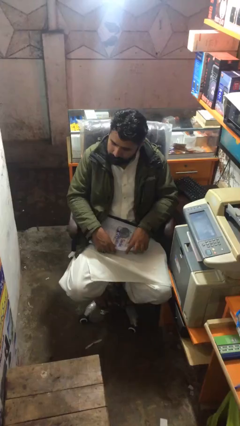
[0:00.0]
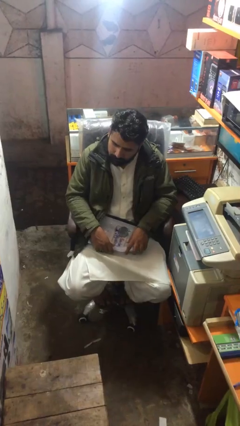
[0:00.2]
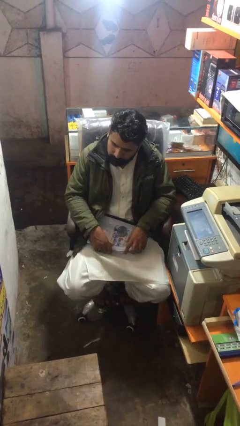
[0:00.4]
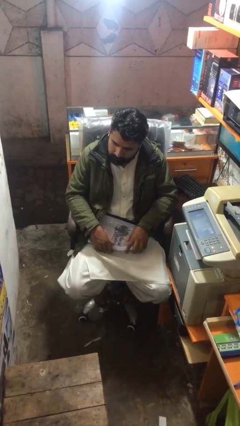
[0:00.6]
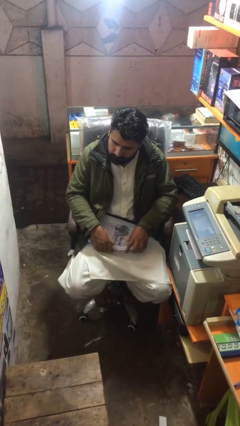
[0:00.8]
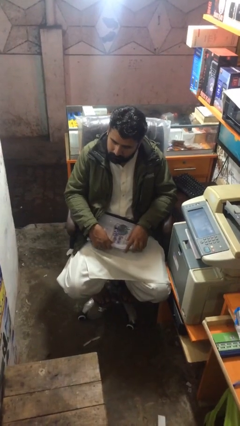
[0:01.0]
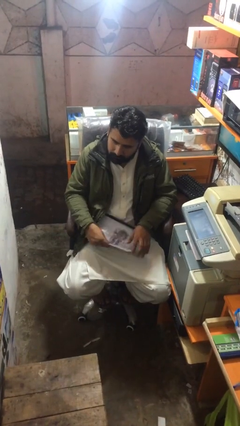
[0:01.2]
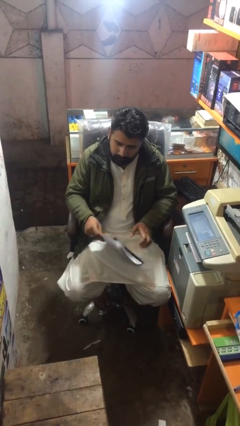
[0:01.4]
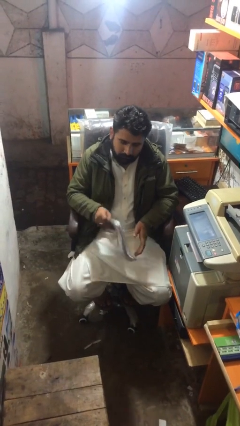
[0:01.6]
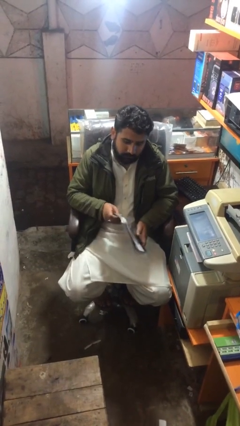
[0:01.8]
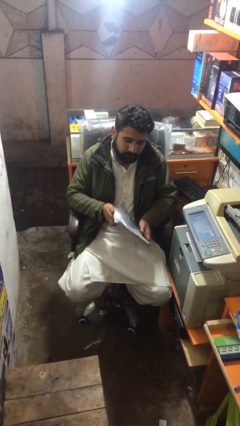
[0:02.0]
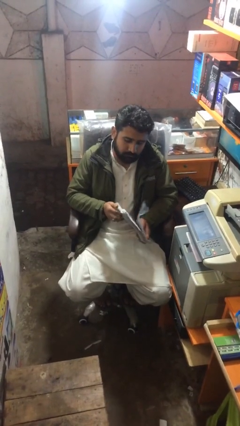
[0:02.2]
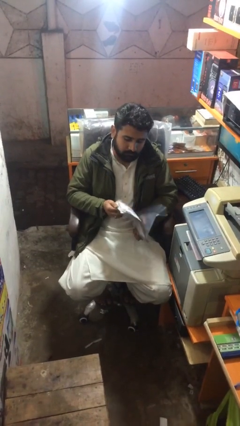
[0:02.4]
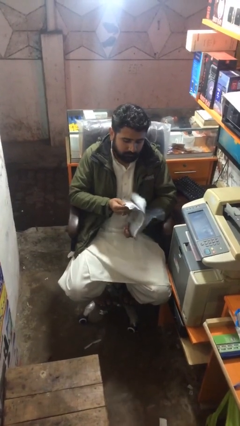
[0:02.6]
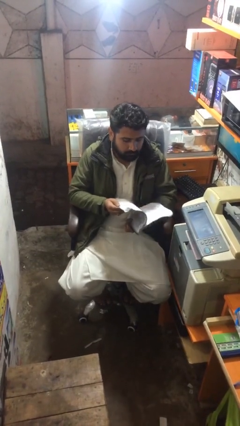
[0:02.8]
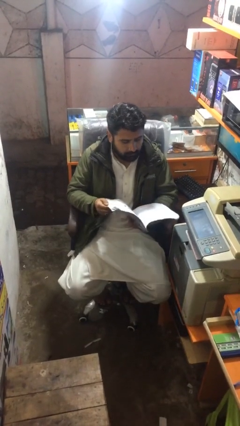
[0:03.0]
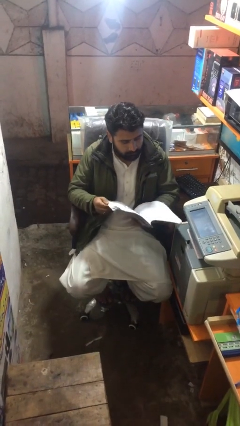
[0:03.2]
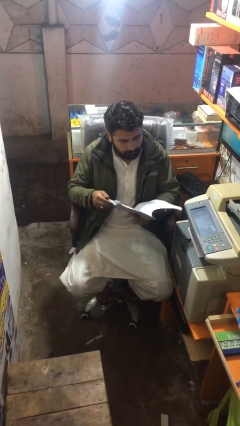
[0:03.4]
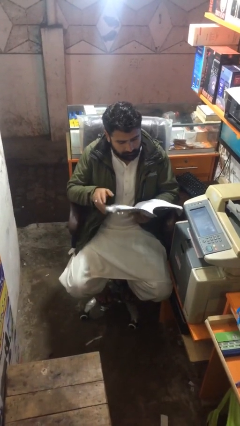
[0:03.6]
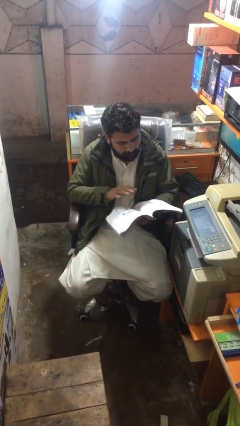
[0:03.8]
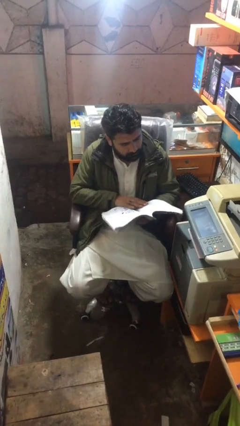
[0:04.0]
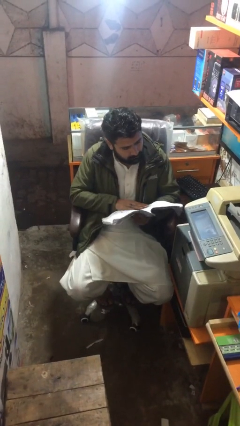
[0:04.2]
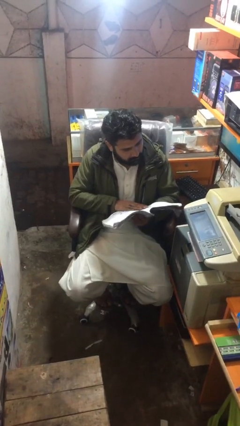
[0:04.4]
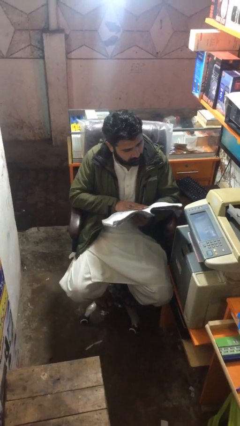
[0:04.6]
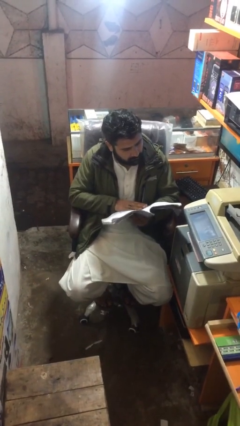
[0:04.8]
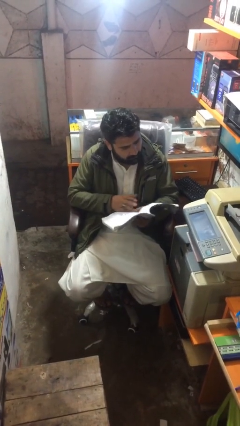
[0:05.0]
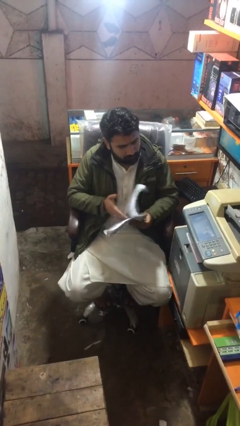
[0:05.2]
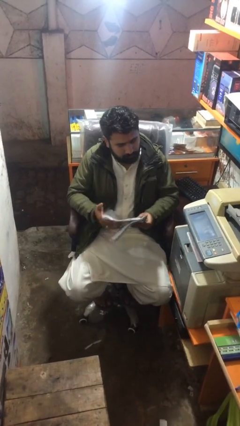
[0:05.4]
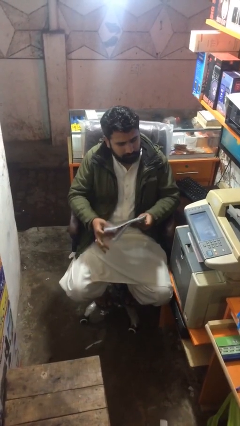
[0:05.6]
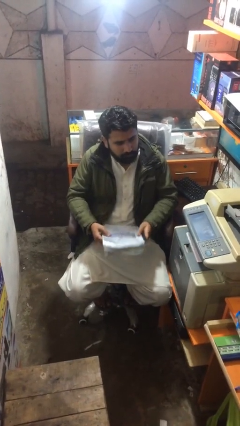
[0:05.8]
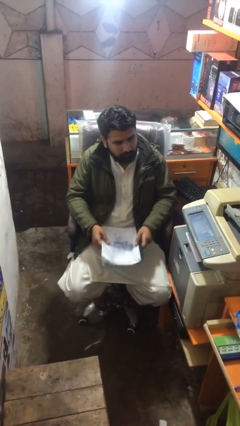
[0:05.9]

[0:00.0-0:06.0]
person reads document

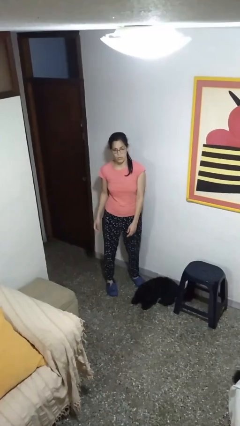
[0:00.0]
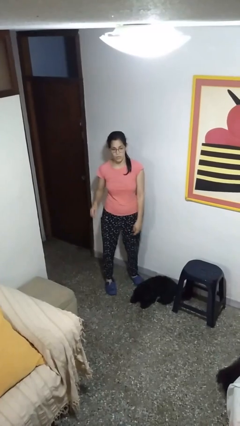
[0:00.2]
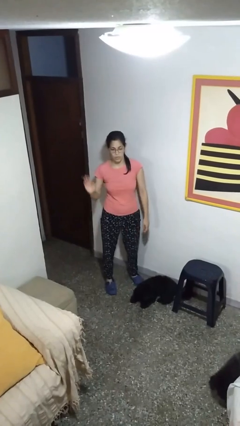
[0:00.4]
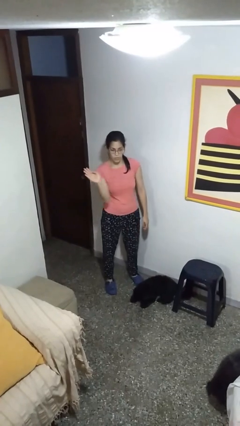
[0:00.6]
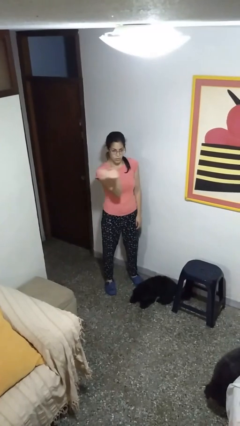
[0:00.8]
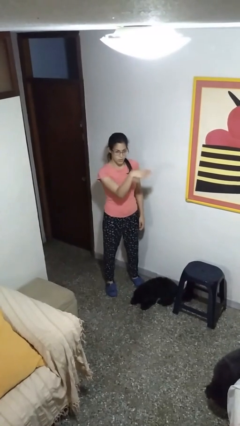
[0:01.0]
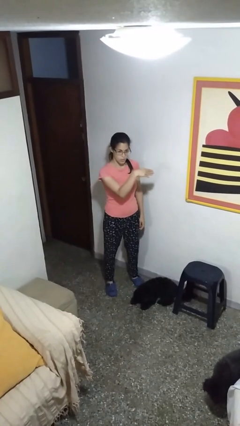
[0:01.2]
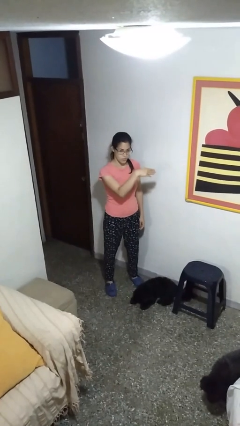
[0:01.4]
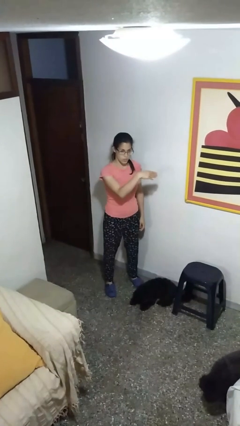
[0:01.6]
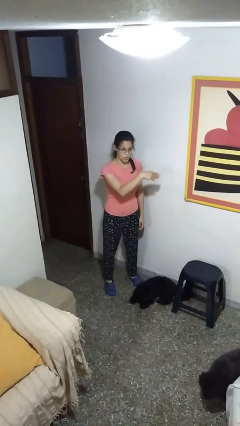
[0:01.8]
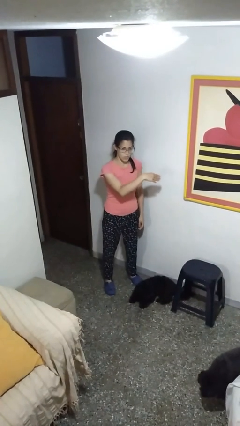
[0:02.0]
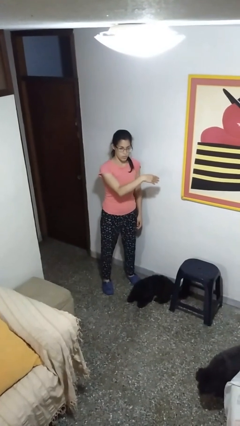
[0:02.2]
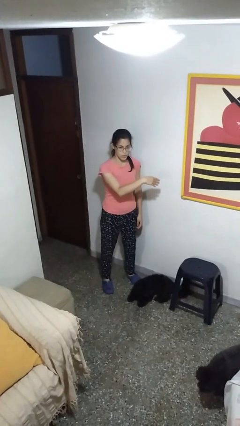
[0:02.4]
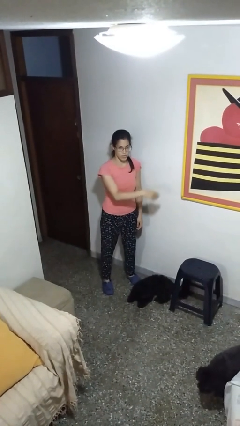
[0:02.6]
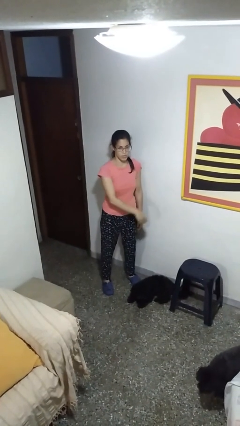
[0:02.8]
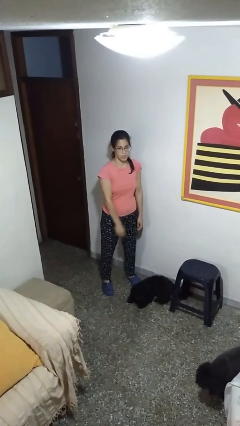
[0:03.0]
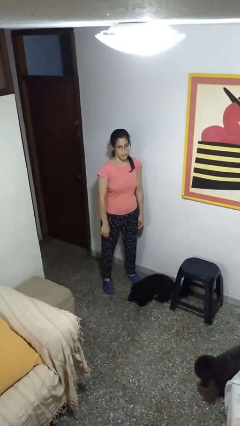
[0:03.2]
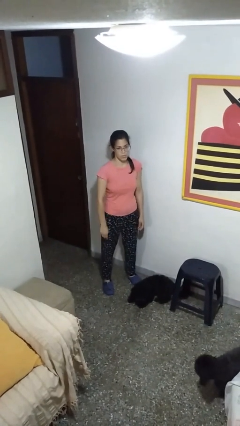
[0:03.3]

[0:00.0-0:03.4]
person gestures swipe left

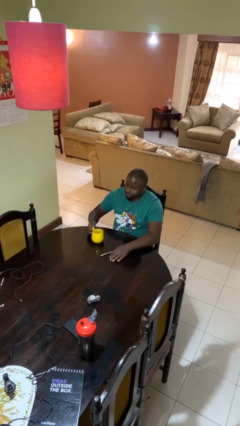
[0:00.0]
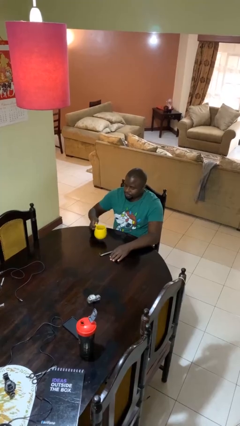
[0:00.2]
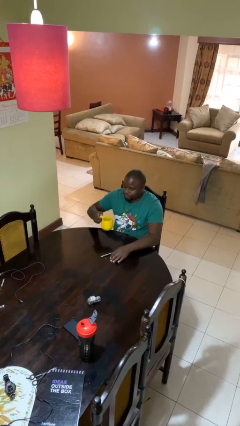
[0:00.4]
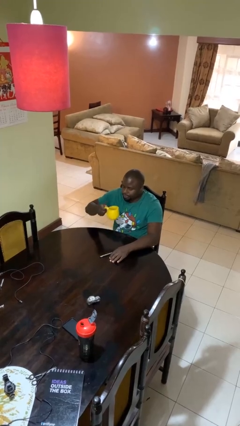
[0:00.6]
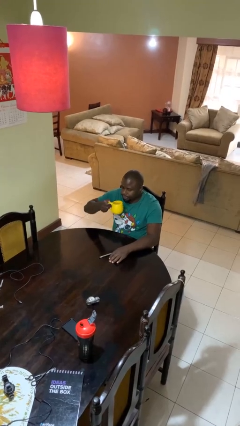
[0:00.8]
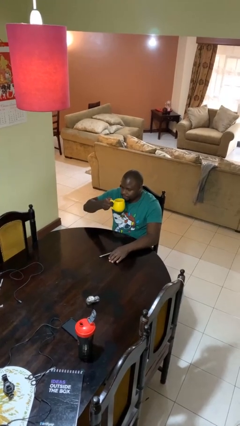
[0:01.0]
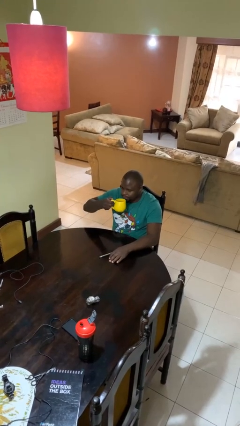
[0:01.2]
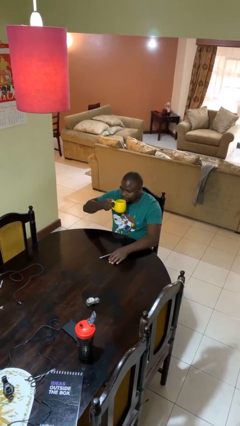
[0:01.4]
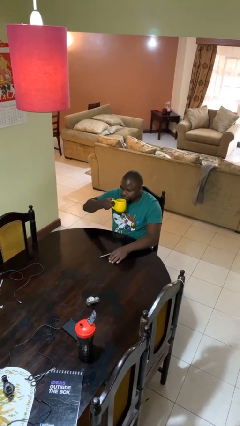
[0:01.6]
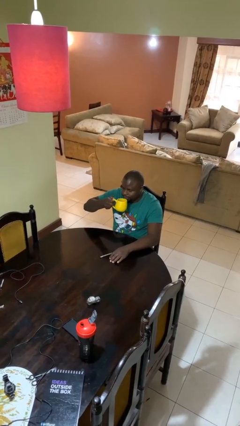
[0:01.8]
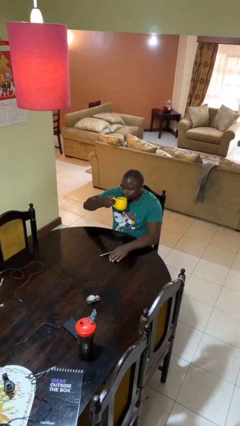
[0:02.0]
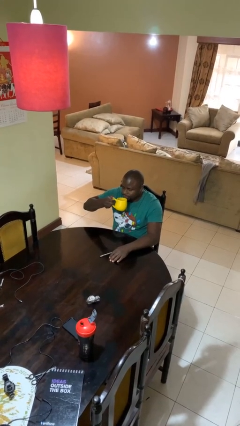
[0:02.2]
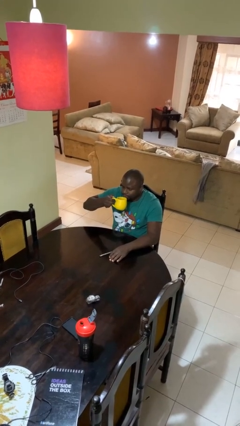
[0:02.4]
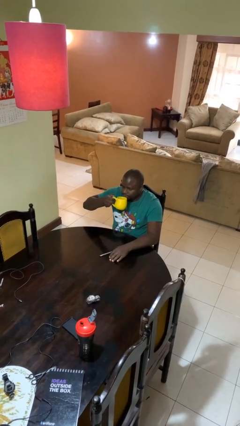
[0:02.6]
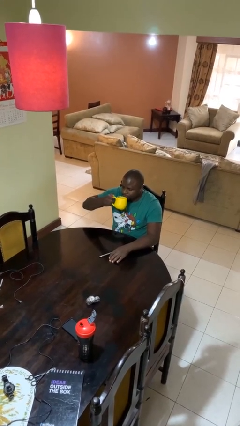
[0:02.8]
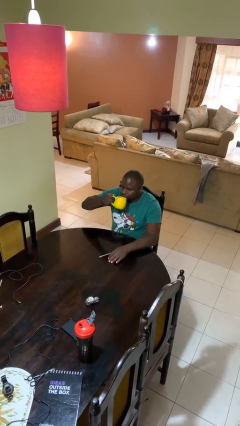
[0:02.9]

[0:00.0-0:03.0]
person picks up object from table

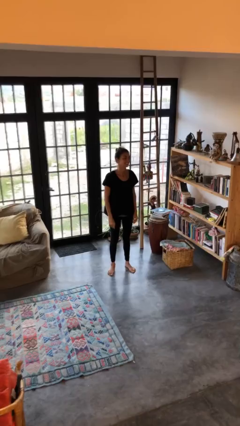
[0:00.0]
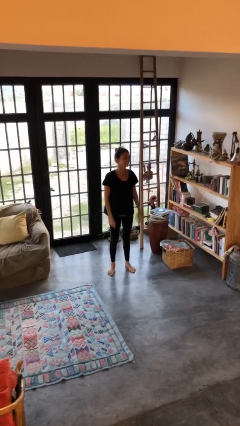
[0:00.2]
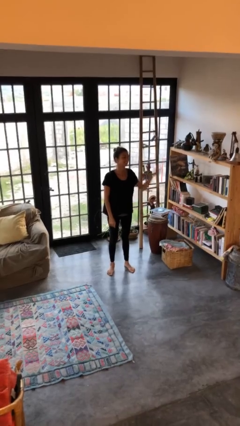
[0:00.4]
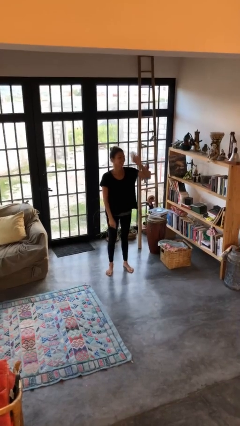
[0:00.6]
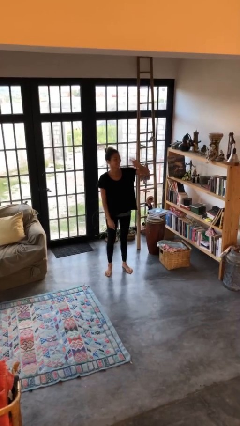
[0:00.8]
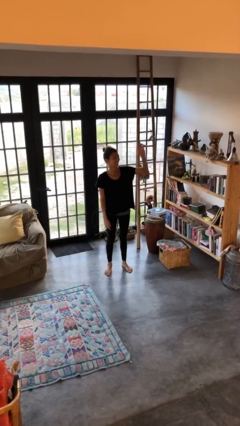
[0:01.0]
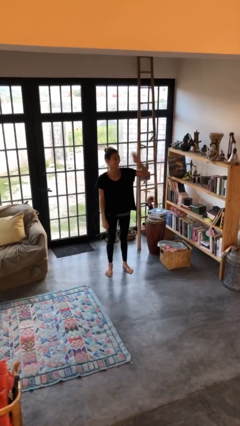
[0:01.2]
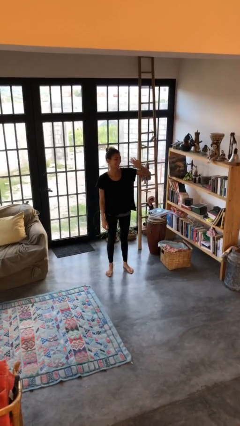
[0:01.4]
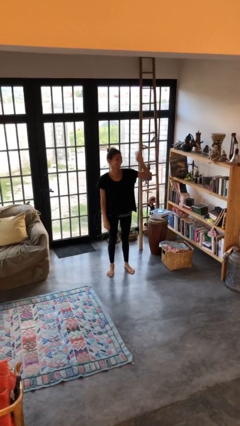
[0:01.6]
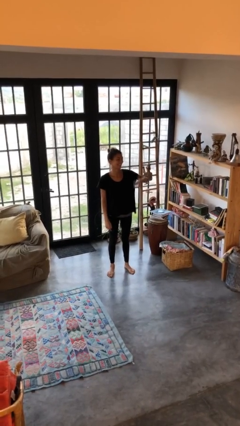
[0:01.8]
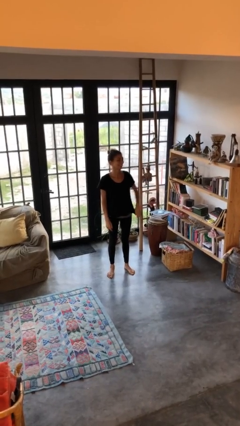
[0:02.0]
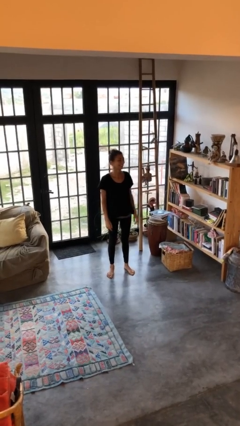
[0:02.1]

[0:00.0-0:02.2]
person waves at person

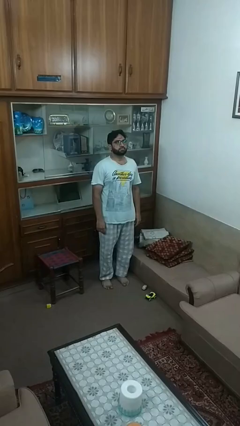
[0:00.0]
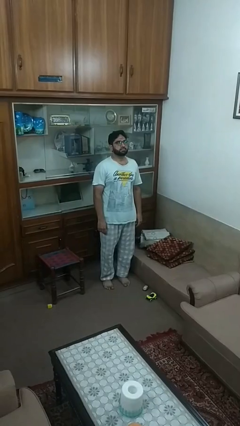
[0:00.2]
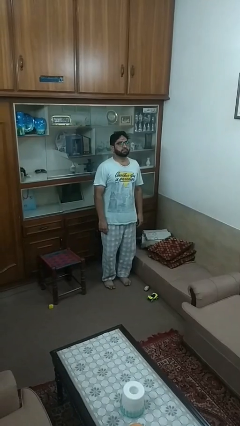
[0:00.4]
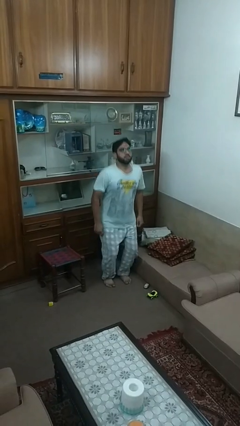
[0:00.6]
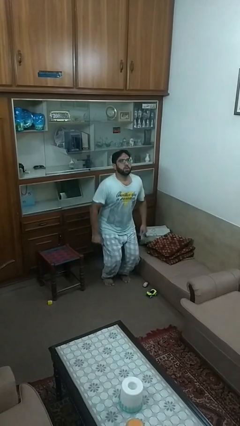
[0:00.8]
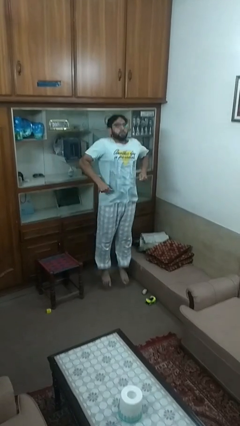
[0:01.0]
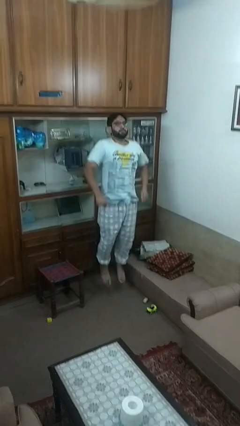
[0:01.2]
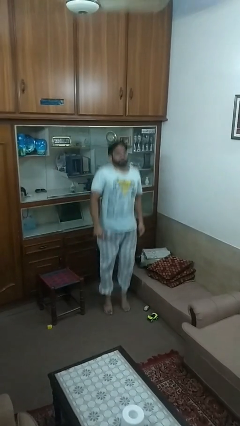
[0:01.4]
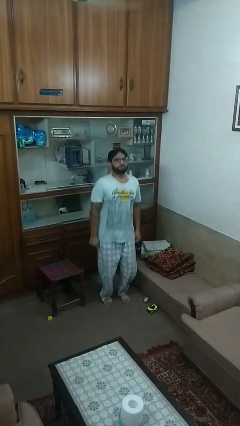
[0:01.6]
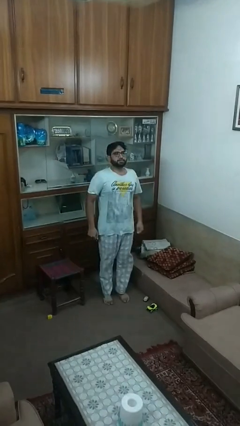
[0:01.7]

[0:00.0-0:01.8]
person jumps

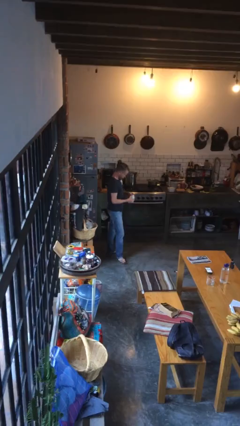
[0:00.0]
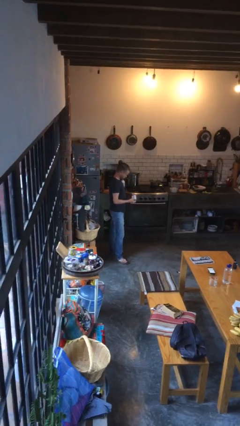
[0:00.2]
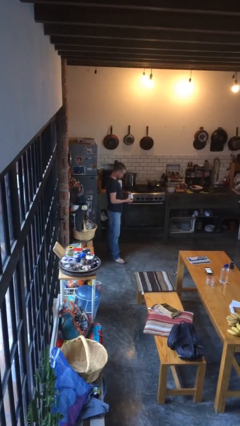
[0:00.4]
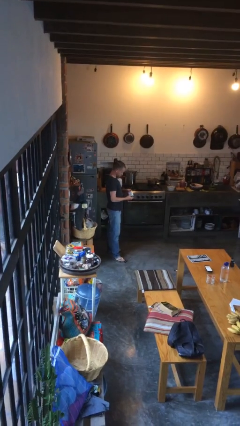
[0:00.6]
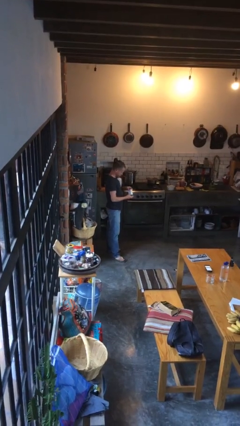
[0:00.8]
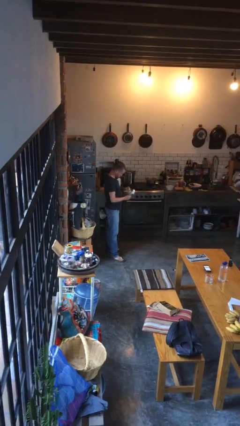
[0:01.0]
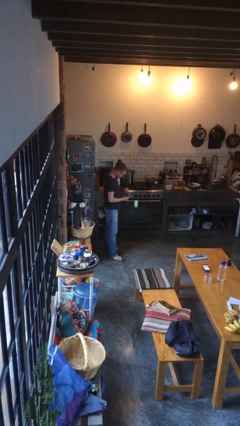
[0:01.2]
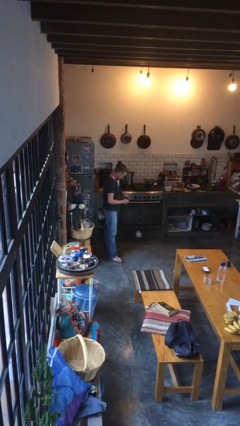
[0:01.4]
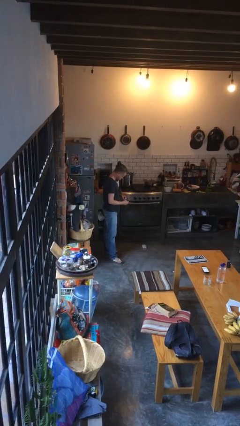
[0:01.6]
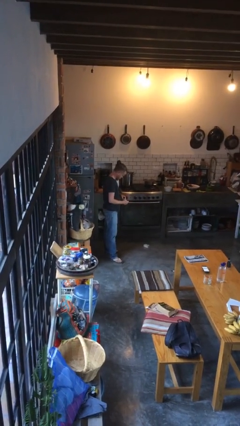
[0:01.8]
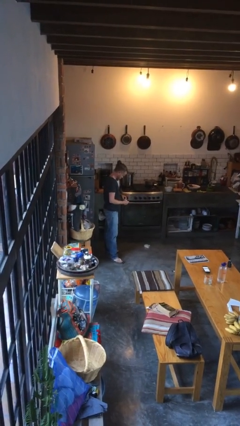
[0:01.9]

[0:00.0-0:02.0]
person drops object
